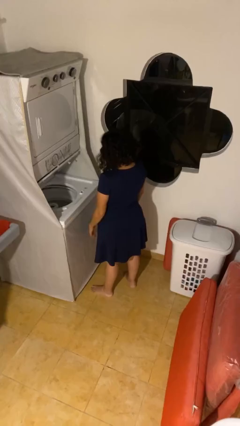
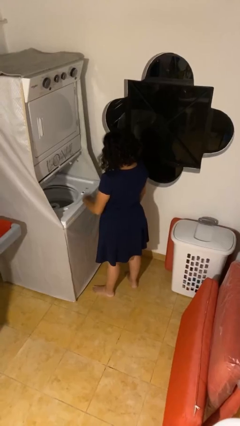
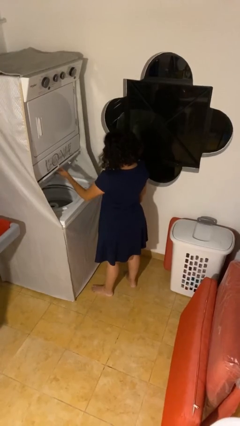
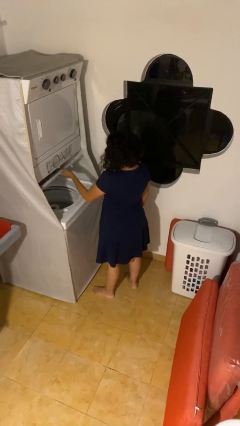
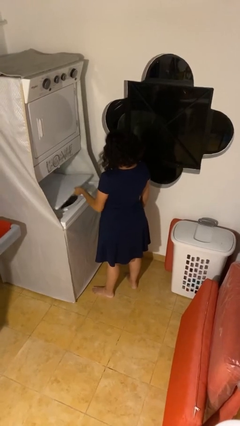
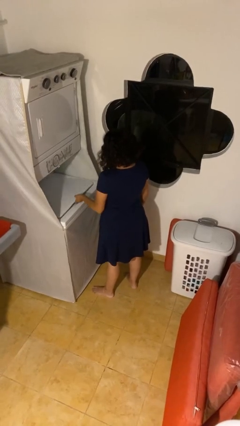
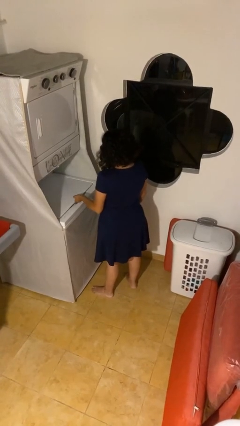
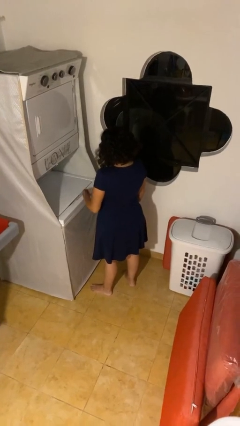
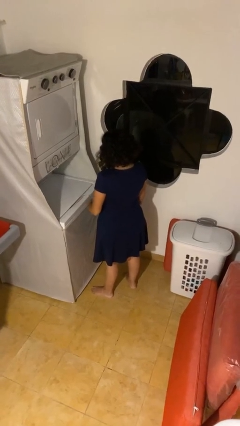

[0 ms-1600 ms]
person closes clothes washer

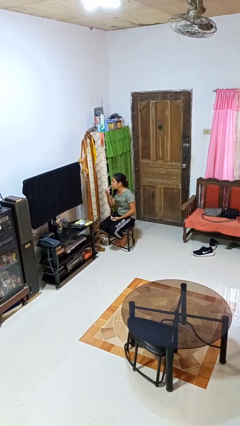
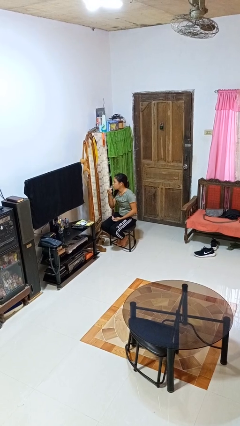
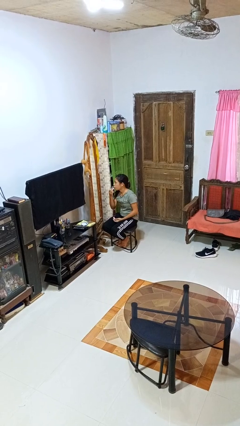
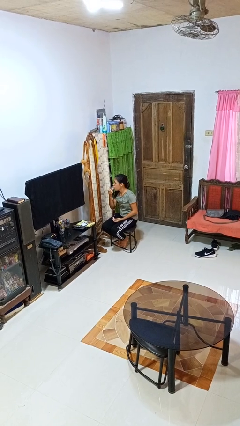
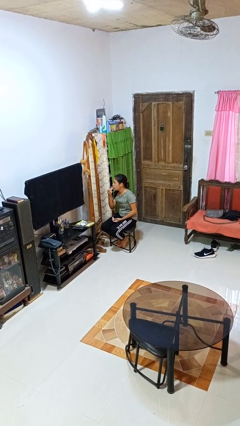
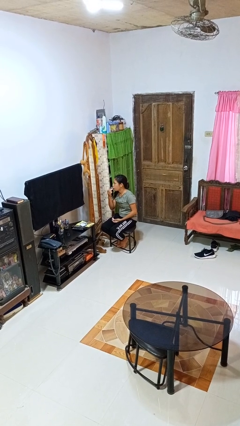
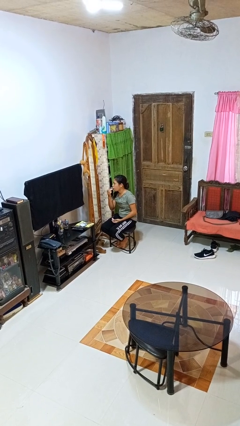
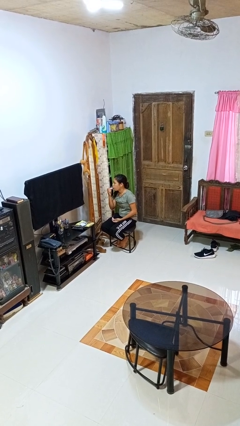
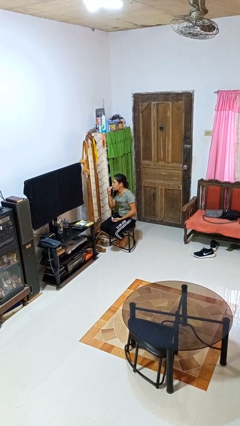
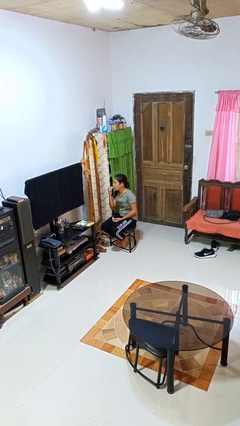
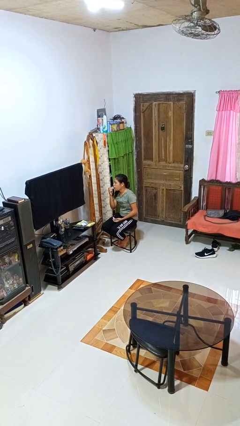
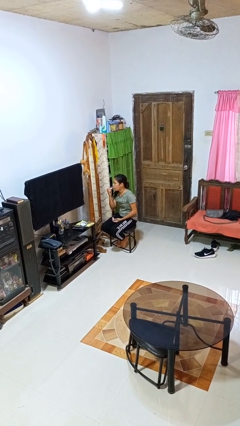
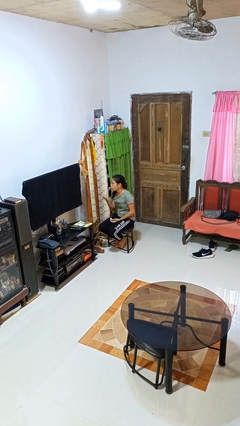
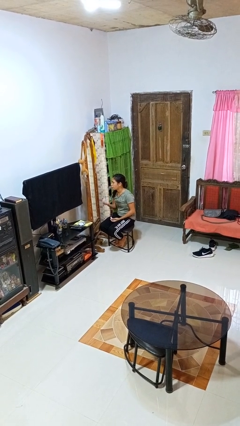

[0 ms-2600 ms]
person applies lip makeup

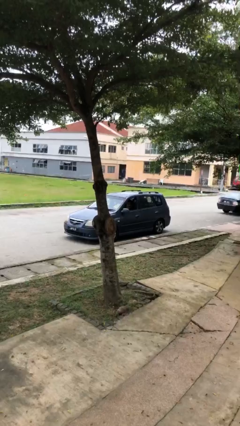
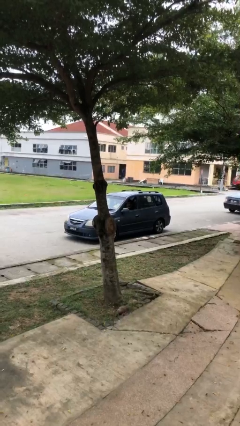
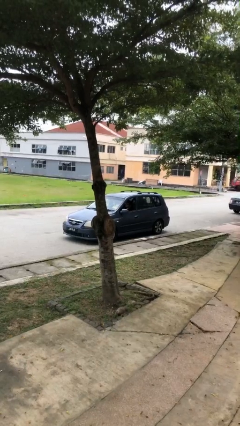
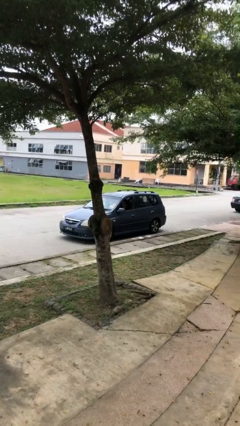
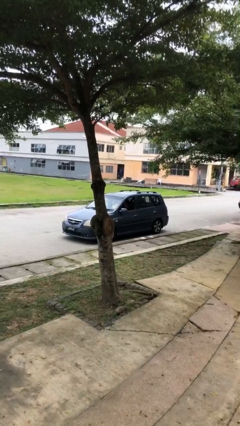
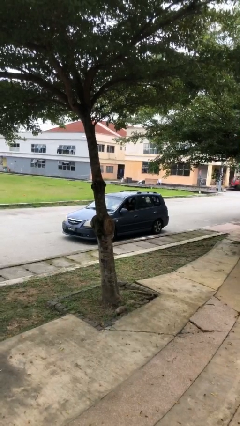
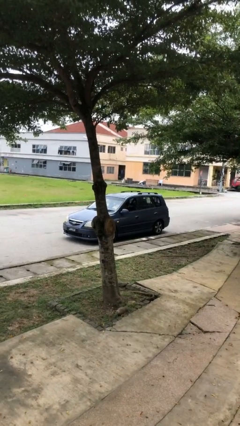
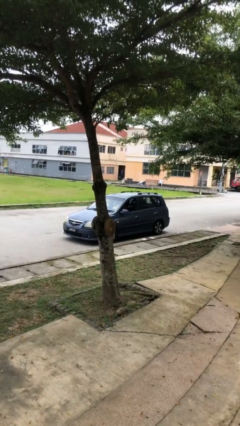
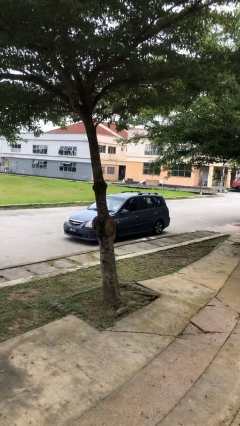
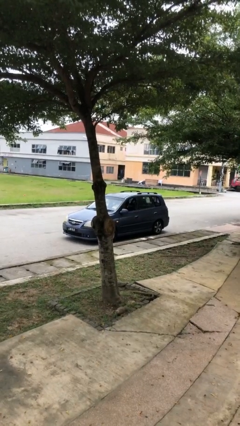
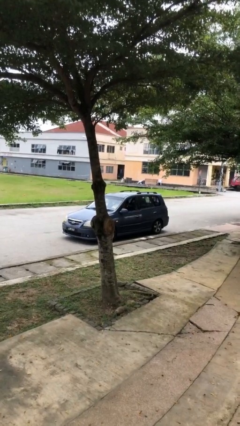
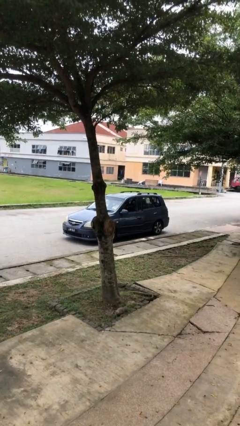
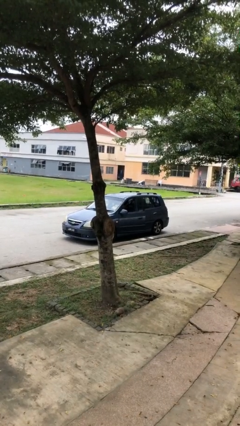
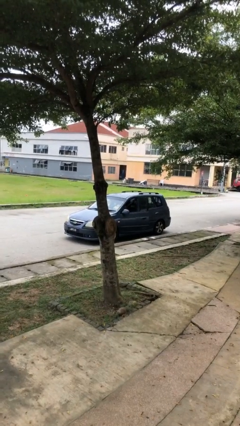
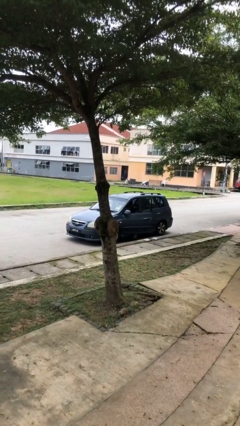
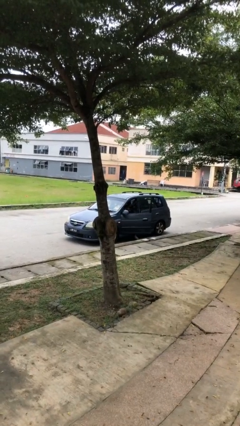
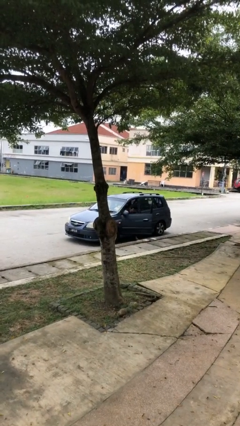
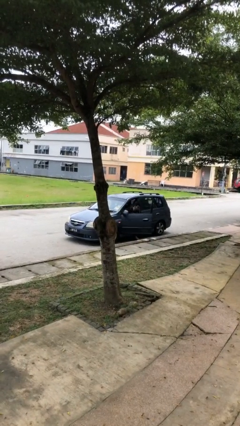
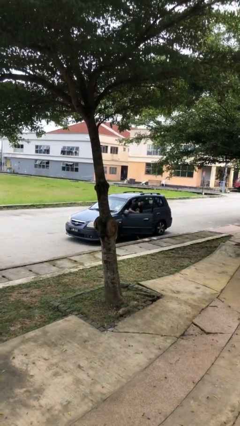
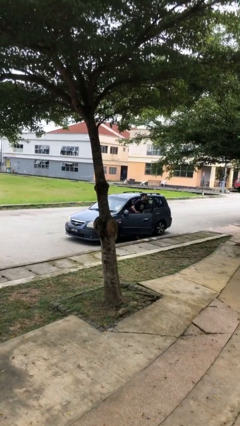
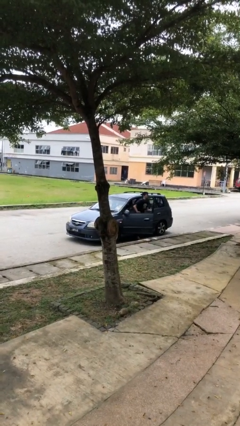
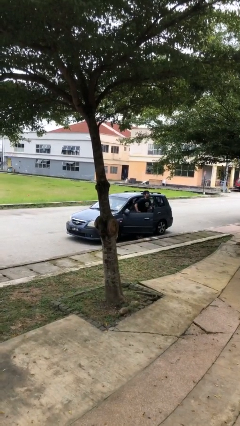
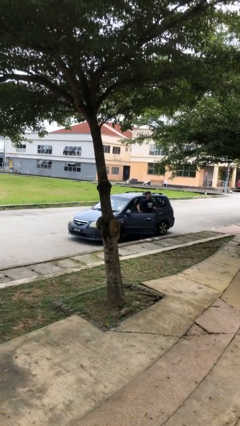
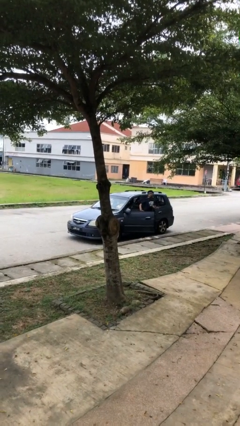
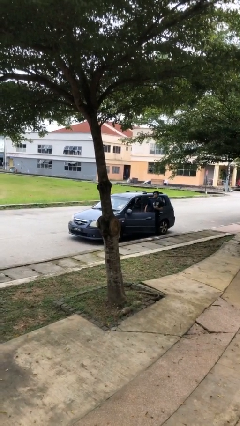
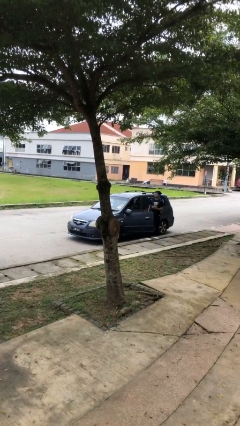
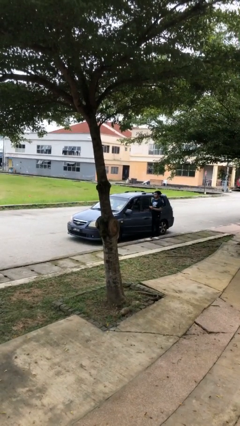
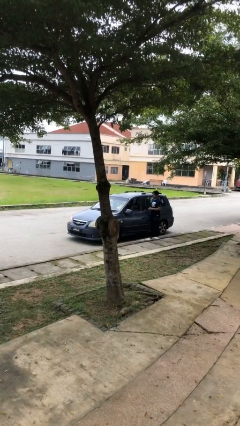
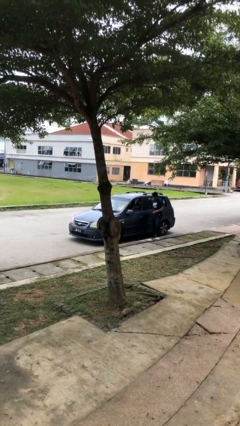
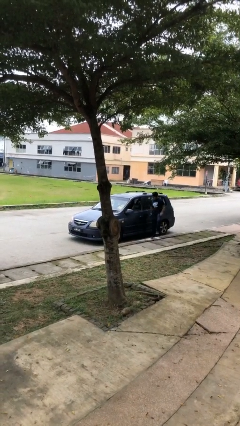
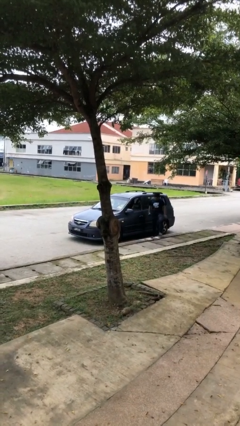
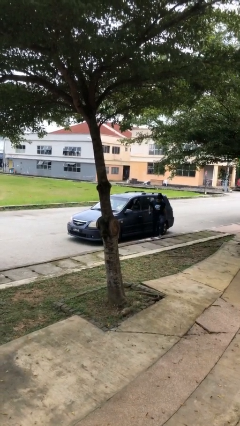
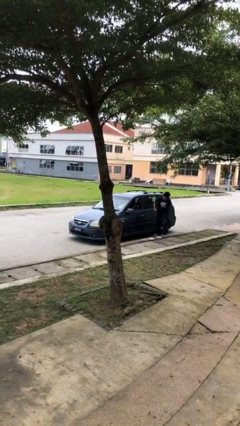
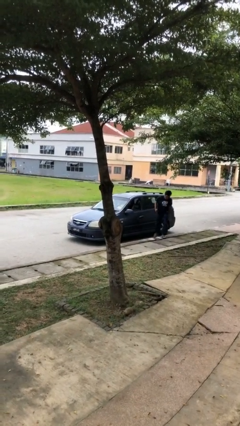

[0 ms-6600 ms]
car drops off person

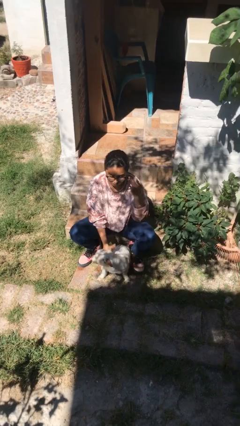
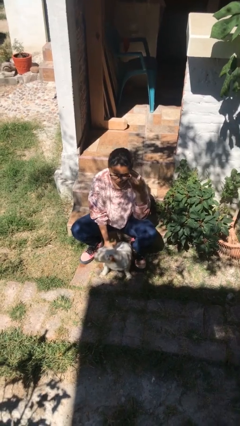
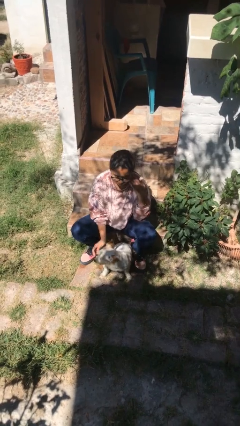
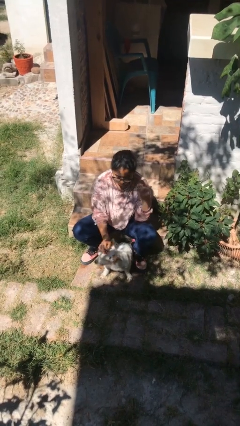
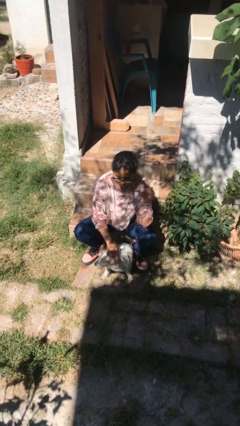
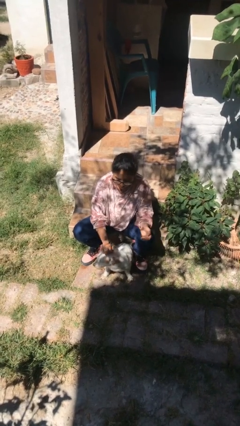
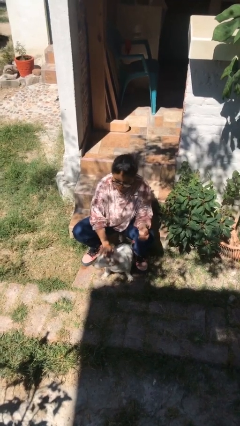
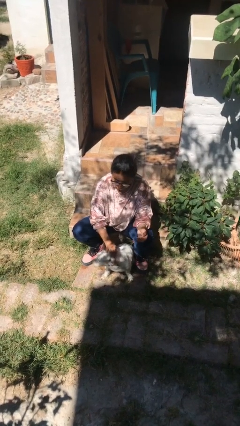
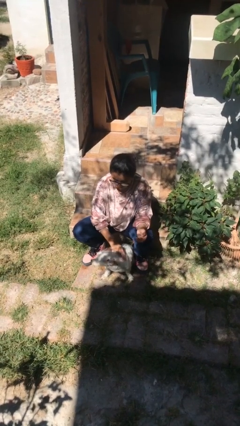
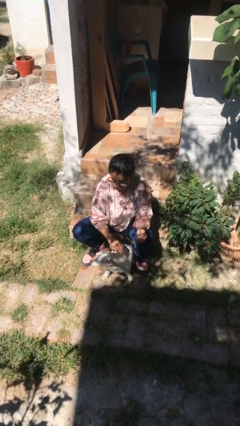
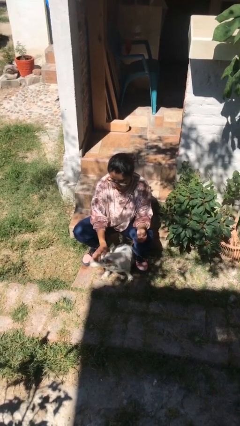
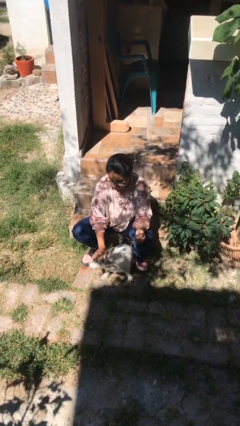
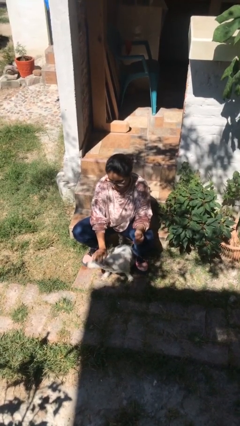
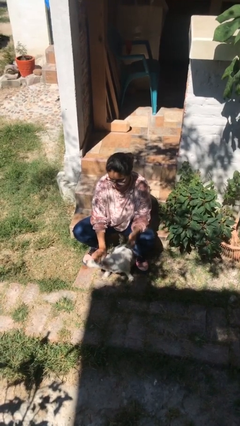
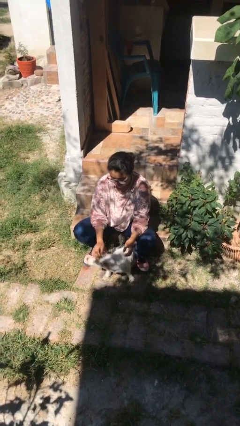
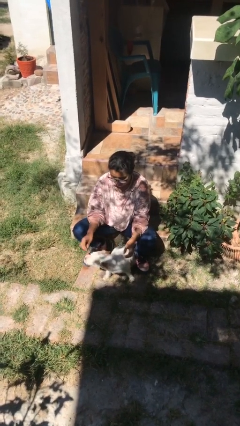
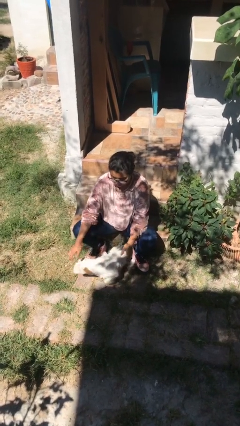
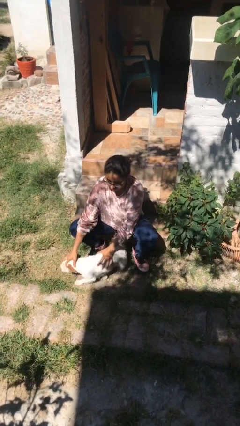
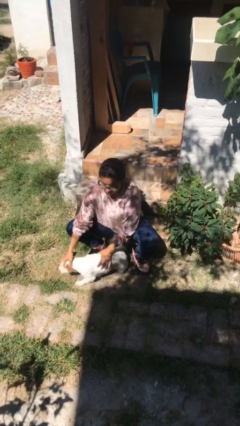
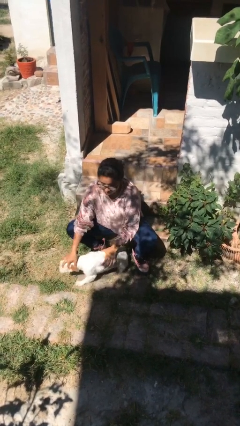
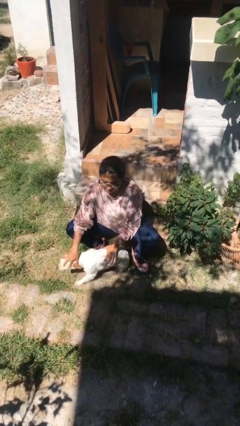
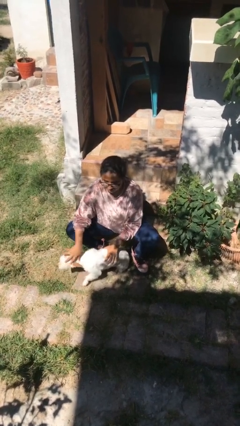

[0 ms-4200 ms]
person pets dog

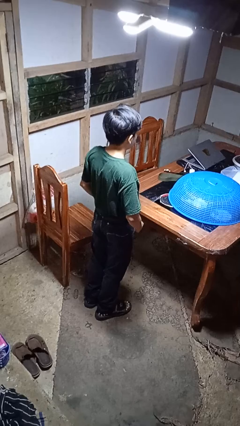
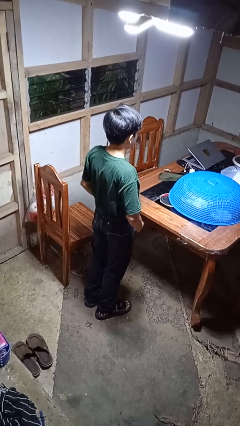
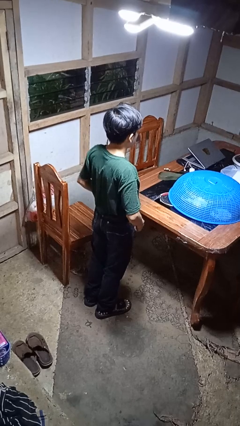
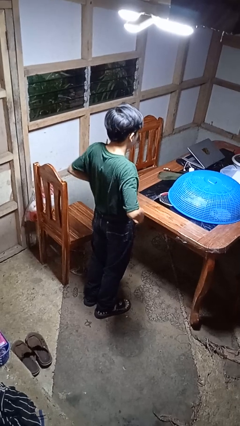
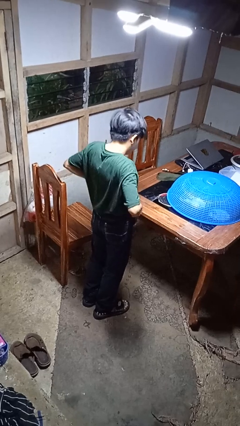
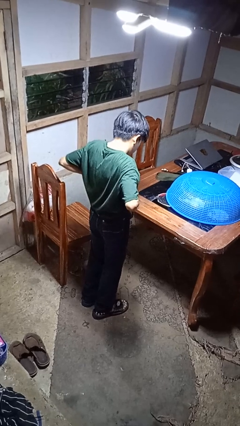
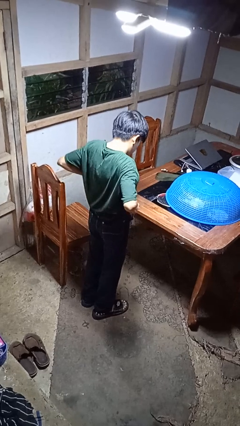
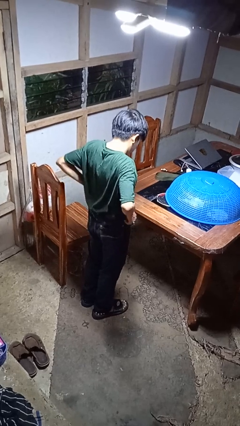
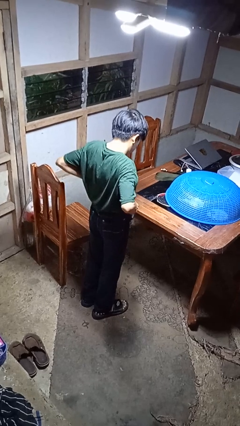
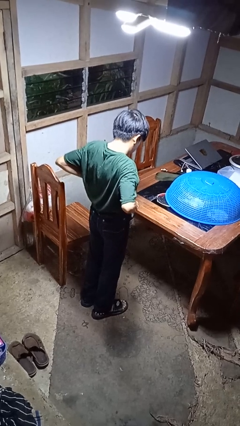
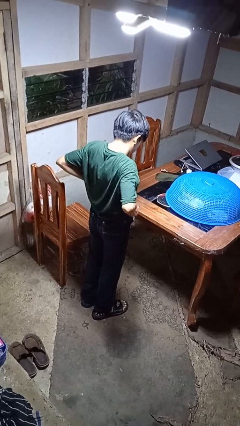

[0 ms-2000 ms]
person hikes up pants

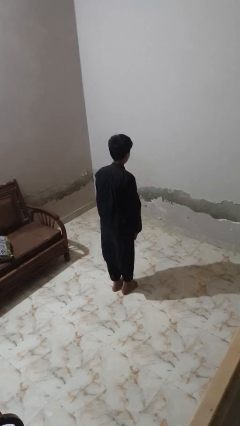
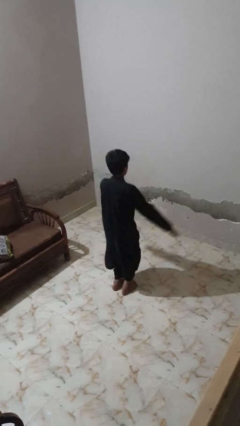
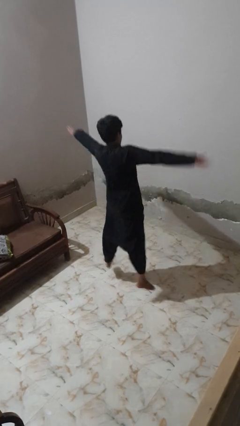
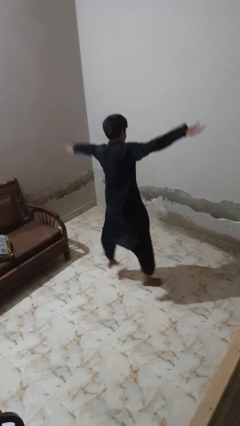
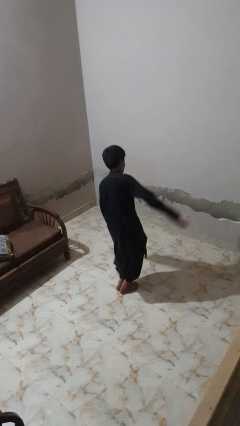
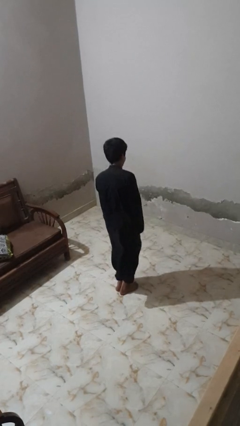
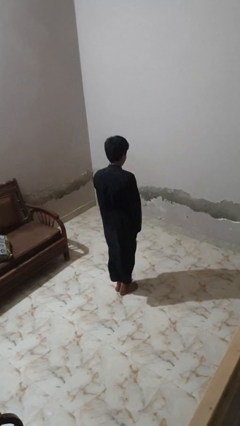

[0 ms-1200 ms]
person exercises with jumping jacks
